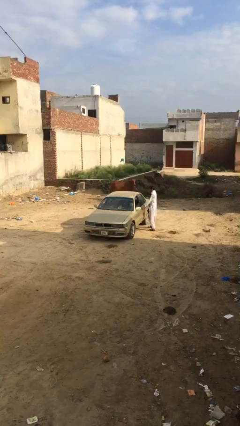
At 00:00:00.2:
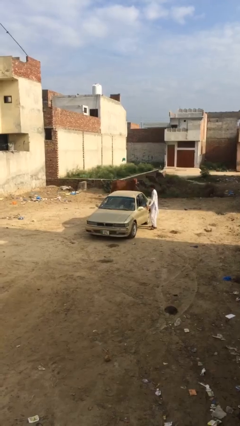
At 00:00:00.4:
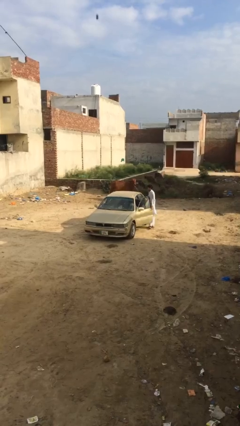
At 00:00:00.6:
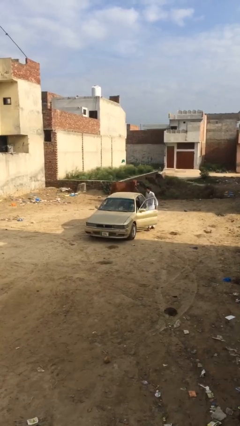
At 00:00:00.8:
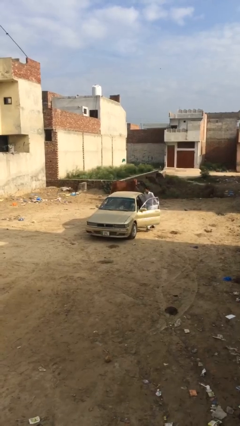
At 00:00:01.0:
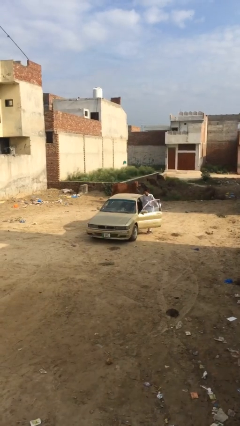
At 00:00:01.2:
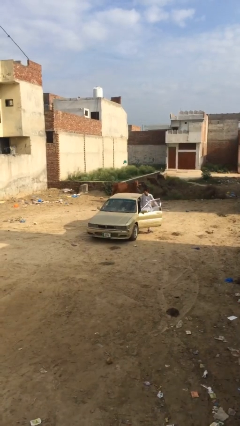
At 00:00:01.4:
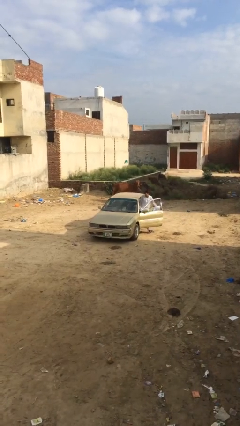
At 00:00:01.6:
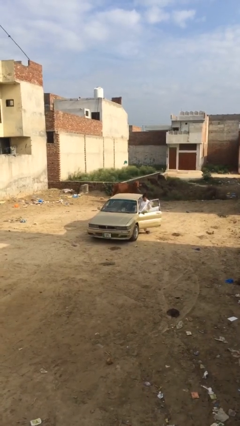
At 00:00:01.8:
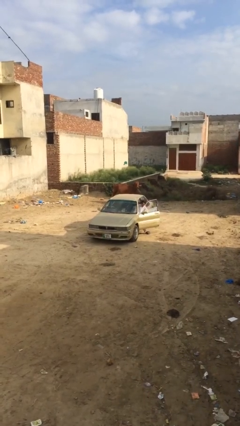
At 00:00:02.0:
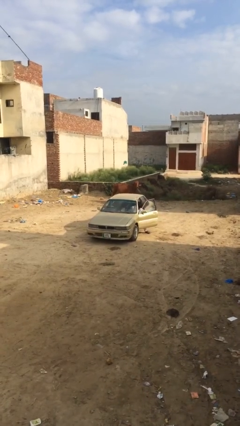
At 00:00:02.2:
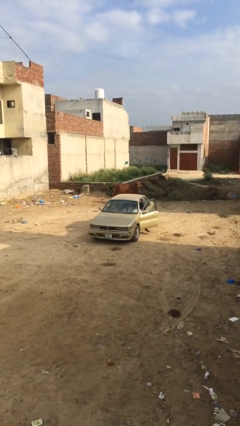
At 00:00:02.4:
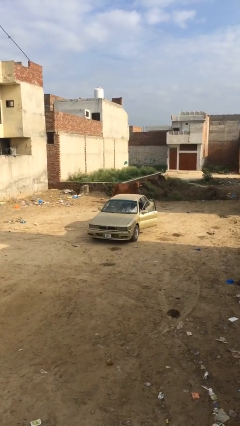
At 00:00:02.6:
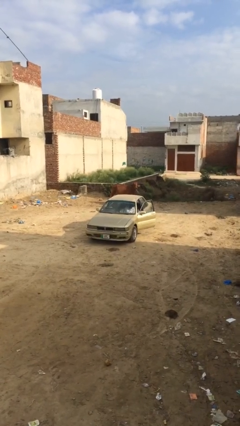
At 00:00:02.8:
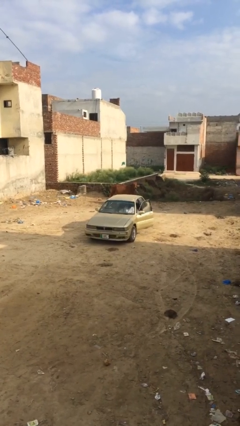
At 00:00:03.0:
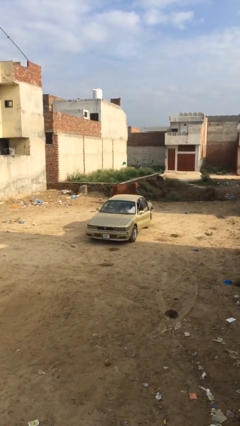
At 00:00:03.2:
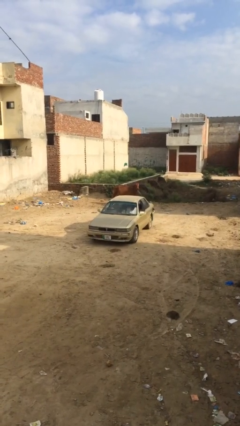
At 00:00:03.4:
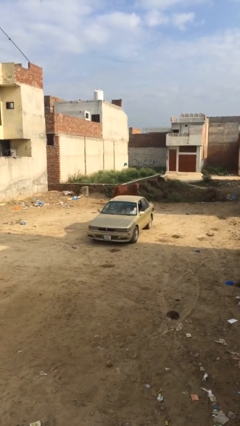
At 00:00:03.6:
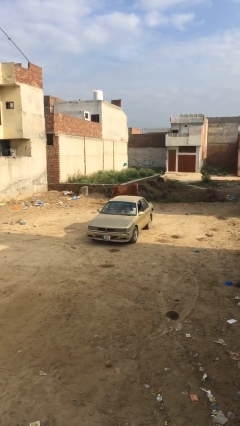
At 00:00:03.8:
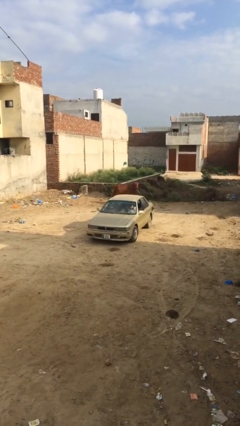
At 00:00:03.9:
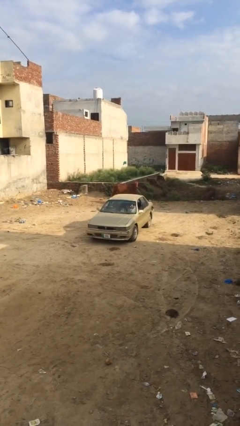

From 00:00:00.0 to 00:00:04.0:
car picks up person

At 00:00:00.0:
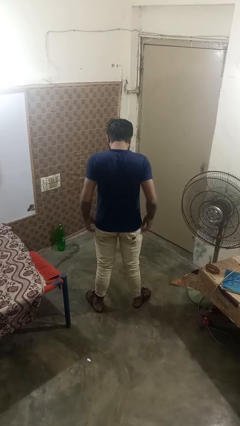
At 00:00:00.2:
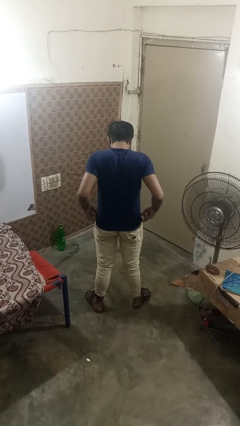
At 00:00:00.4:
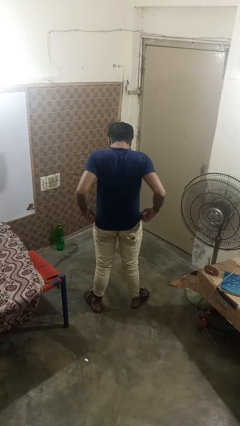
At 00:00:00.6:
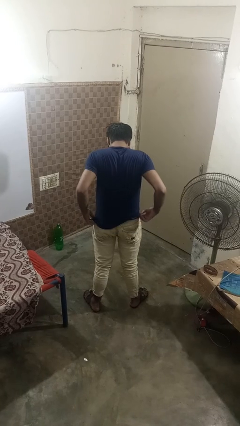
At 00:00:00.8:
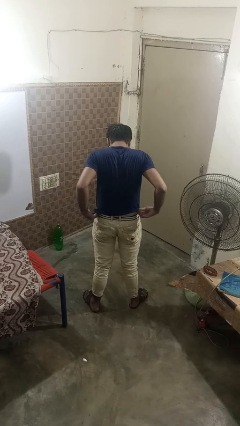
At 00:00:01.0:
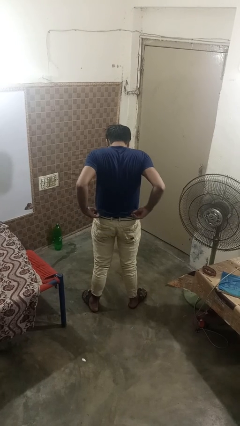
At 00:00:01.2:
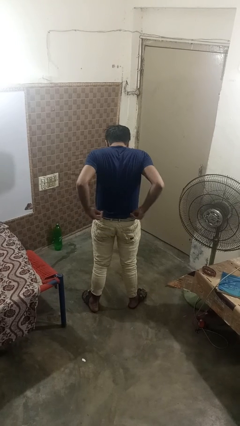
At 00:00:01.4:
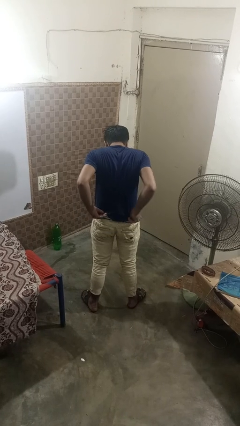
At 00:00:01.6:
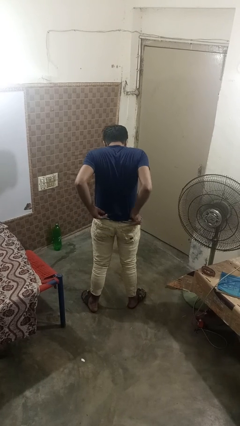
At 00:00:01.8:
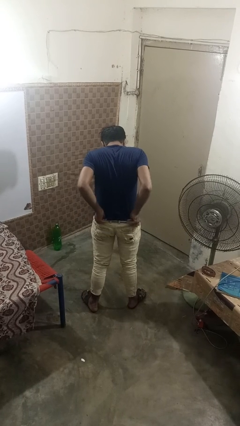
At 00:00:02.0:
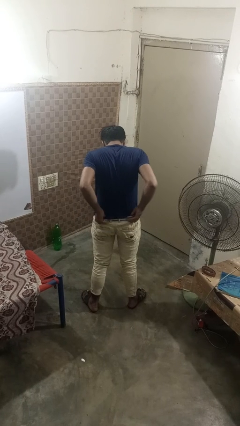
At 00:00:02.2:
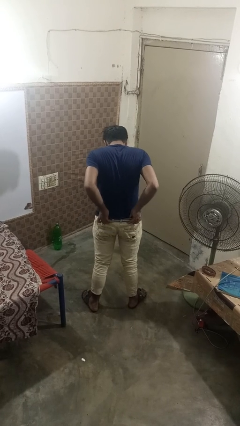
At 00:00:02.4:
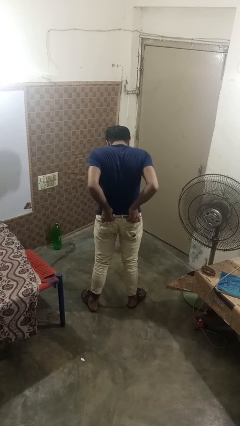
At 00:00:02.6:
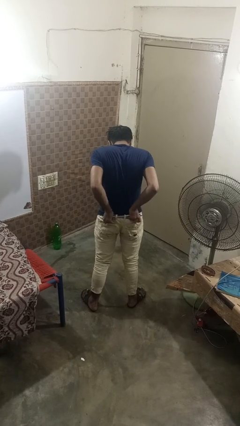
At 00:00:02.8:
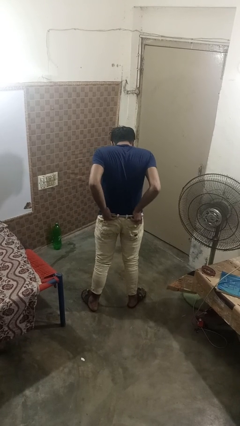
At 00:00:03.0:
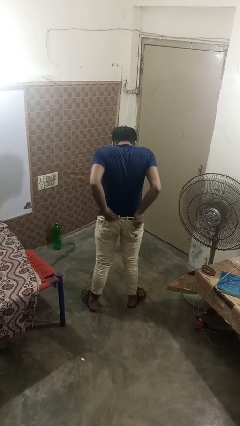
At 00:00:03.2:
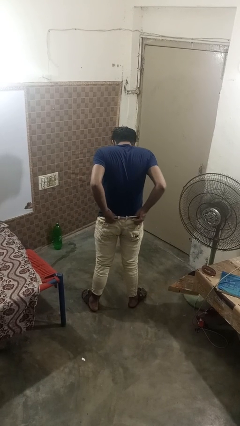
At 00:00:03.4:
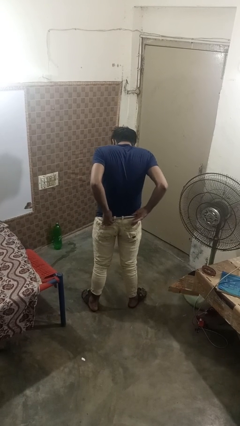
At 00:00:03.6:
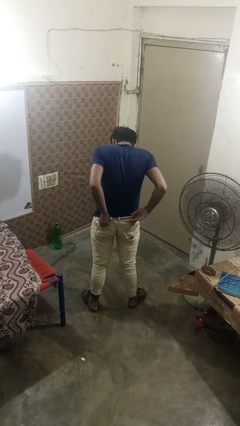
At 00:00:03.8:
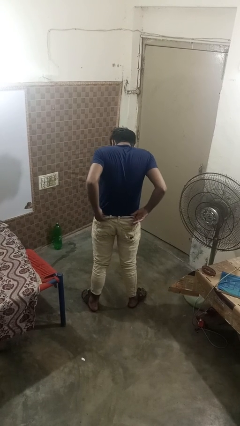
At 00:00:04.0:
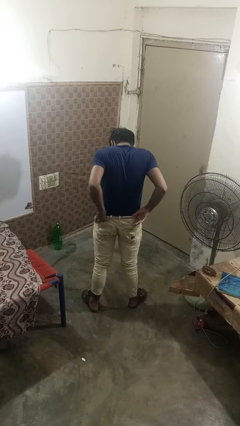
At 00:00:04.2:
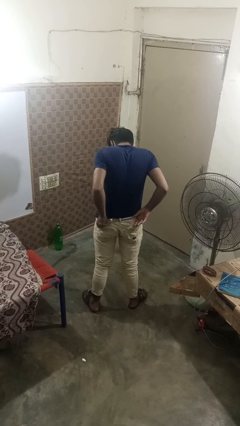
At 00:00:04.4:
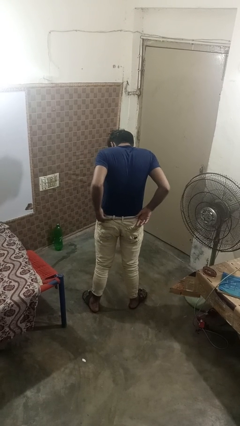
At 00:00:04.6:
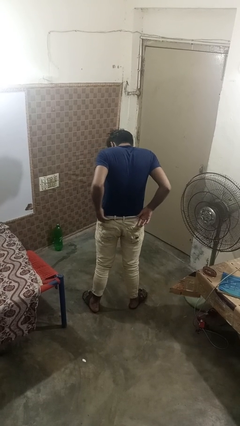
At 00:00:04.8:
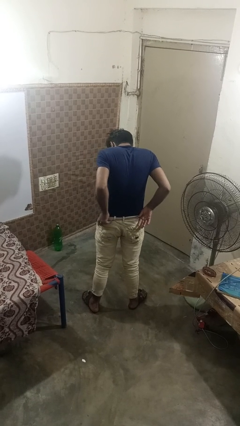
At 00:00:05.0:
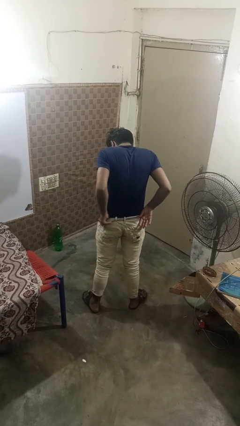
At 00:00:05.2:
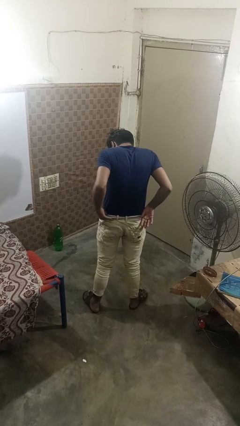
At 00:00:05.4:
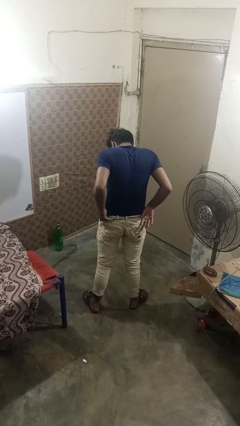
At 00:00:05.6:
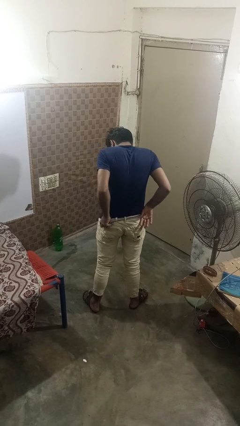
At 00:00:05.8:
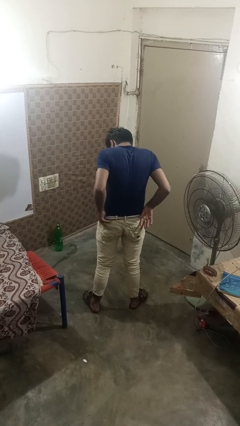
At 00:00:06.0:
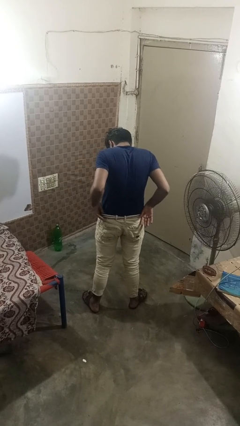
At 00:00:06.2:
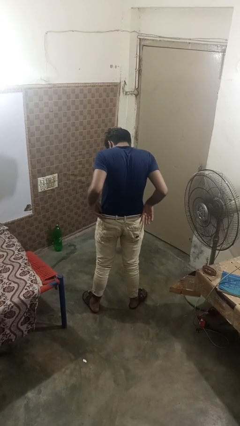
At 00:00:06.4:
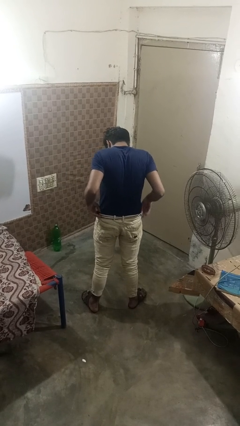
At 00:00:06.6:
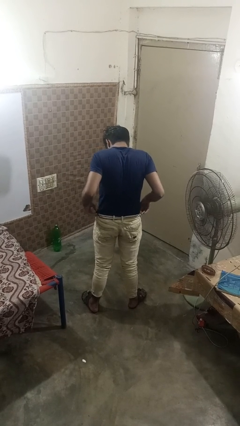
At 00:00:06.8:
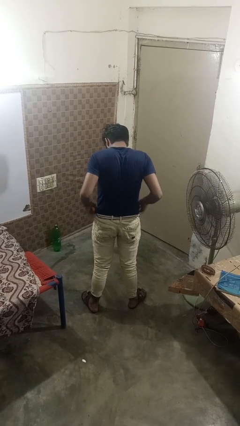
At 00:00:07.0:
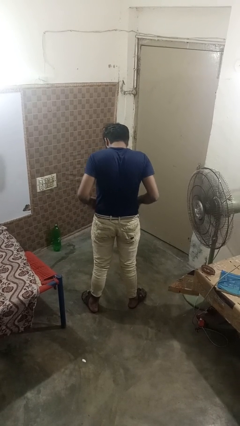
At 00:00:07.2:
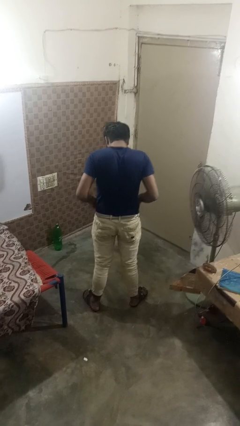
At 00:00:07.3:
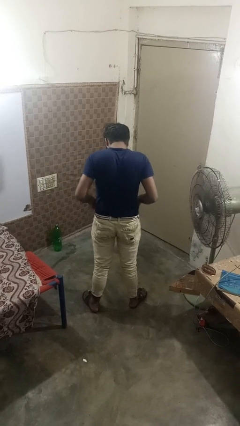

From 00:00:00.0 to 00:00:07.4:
person tucks in shirt

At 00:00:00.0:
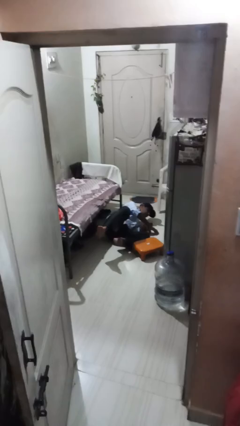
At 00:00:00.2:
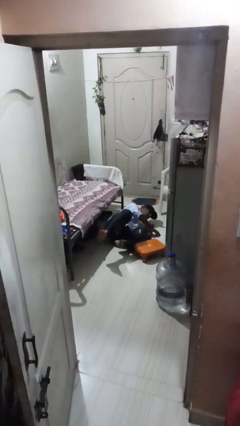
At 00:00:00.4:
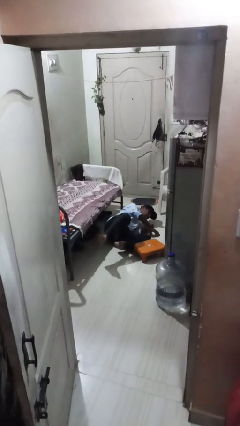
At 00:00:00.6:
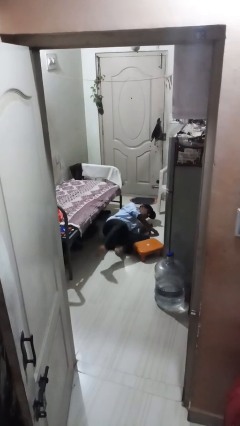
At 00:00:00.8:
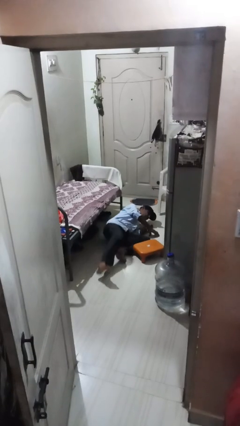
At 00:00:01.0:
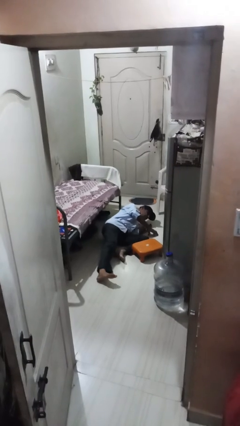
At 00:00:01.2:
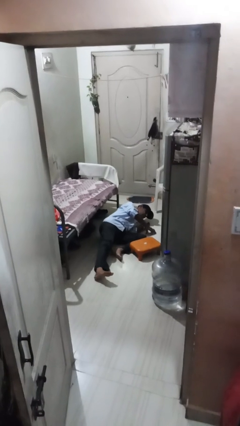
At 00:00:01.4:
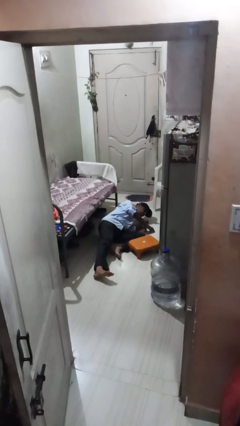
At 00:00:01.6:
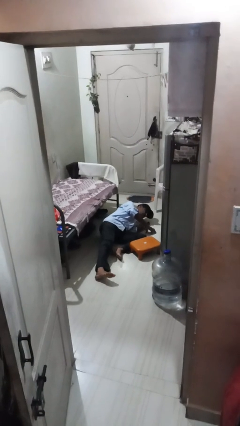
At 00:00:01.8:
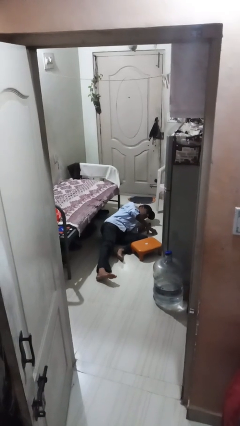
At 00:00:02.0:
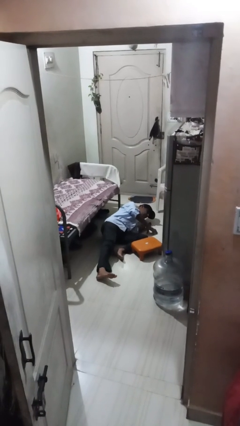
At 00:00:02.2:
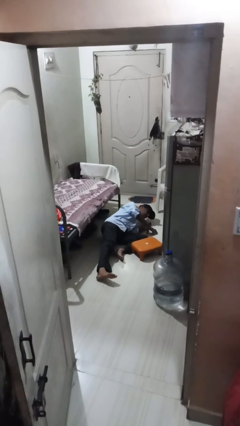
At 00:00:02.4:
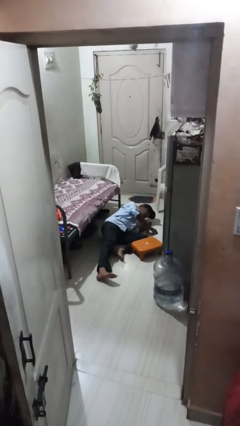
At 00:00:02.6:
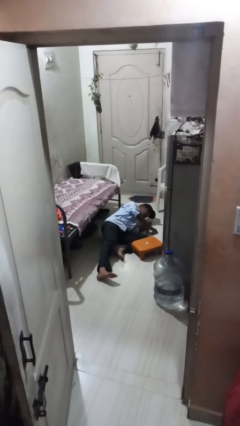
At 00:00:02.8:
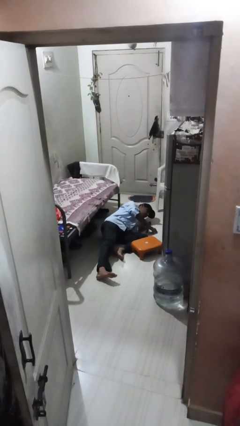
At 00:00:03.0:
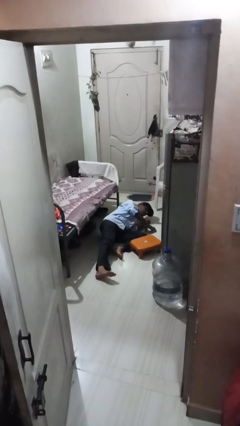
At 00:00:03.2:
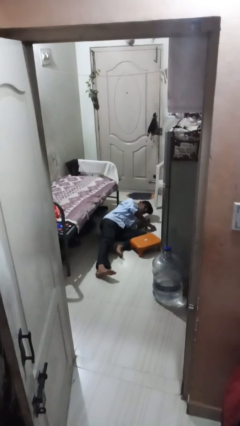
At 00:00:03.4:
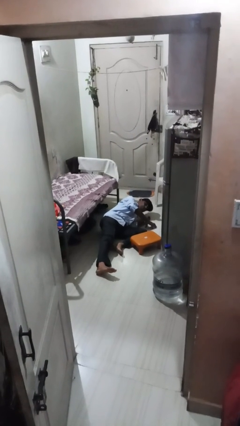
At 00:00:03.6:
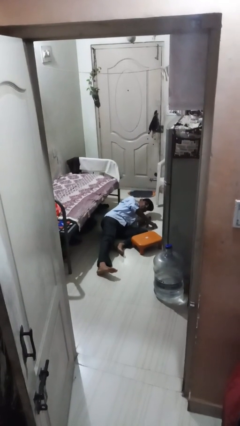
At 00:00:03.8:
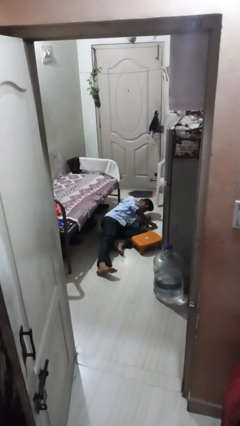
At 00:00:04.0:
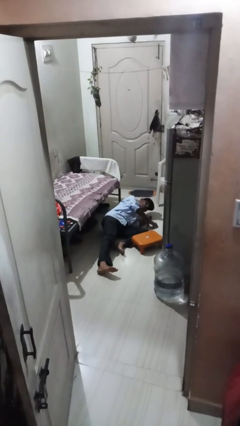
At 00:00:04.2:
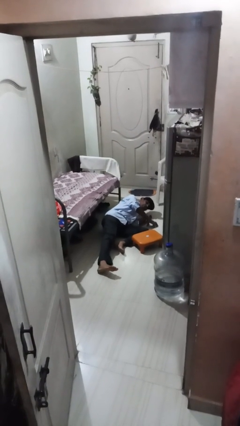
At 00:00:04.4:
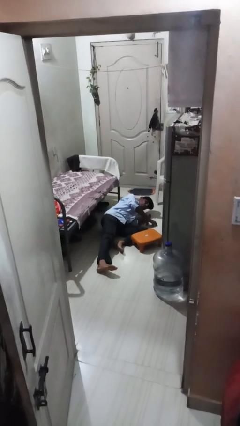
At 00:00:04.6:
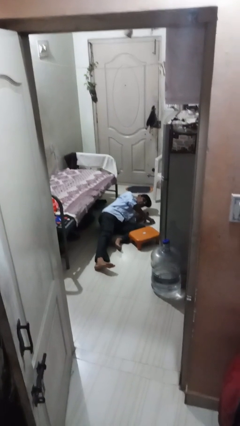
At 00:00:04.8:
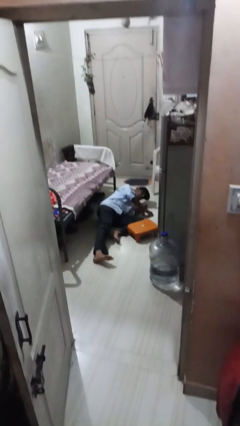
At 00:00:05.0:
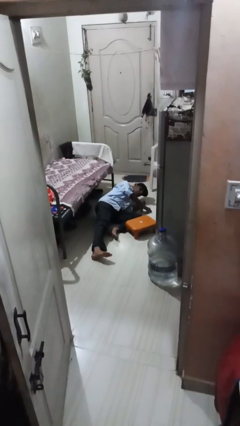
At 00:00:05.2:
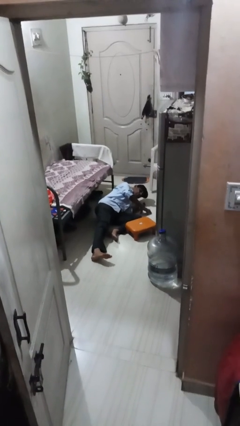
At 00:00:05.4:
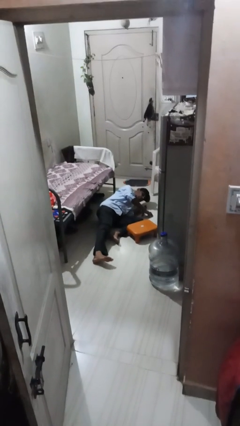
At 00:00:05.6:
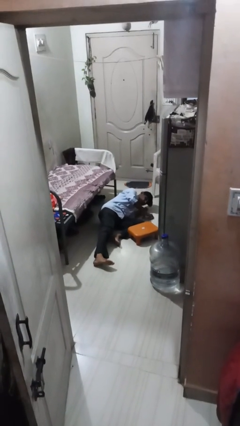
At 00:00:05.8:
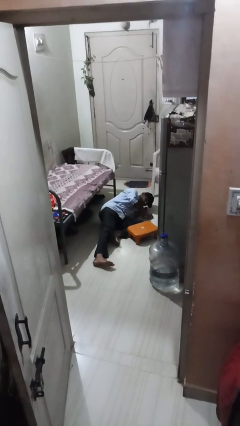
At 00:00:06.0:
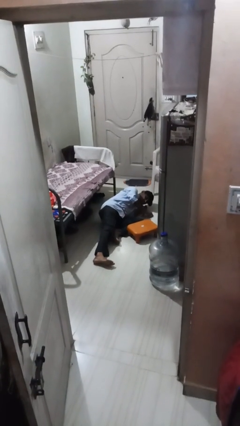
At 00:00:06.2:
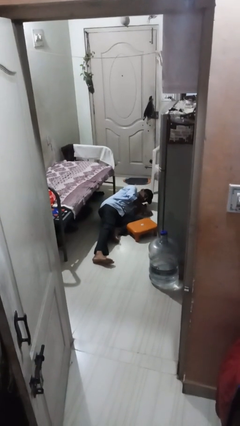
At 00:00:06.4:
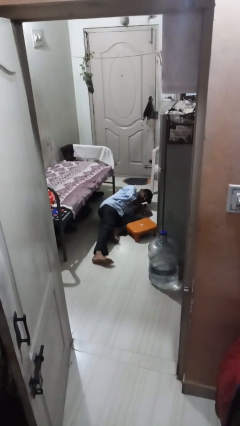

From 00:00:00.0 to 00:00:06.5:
person lies down on floor
